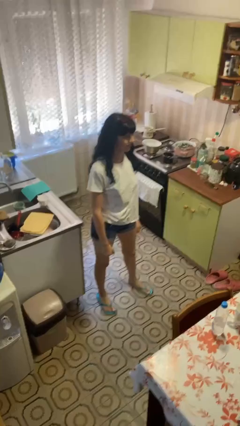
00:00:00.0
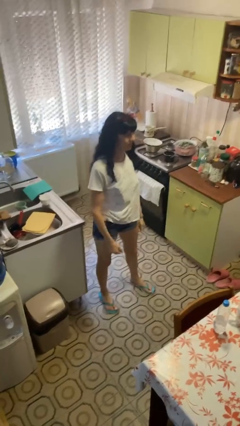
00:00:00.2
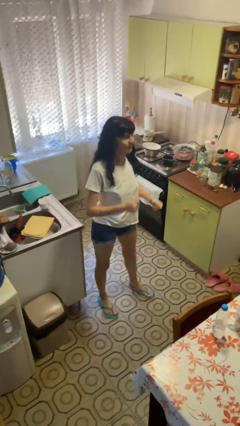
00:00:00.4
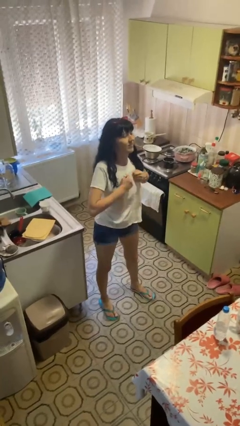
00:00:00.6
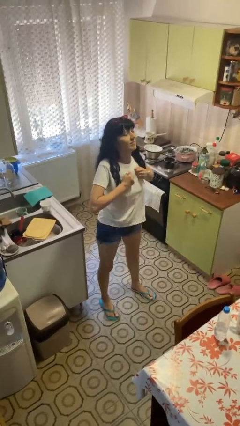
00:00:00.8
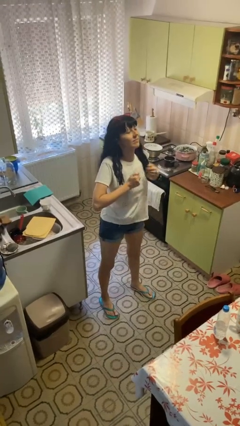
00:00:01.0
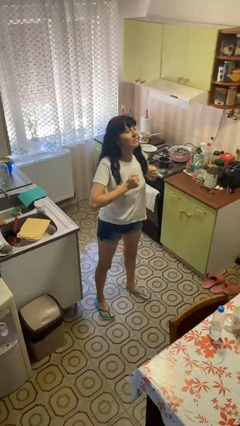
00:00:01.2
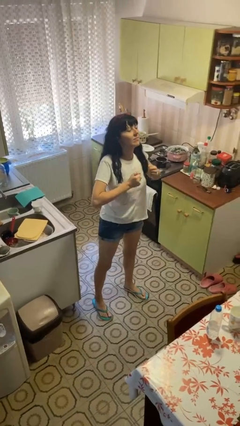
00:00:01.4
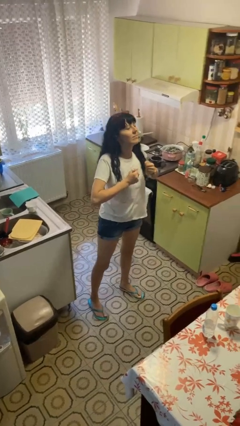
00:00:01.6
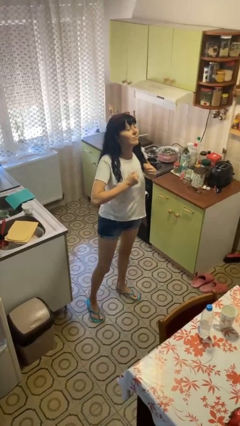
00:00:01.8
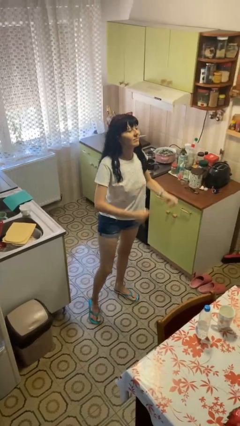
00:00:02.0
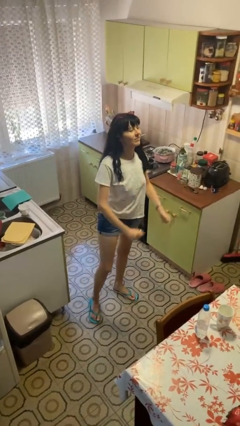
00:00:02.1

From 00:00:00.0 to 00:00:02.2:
person drums on chest

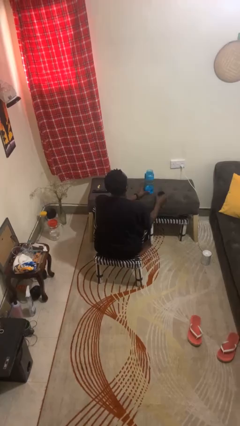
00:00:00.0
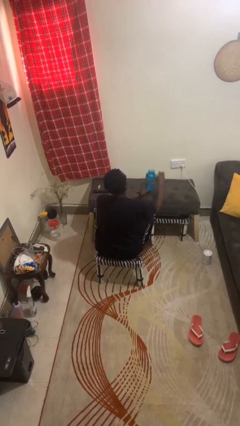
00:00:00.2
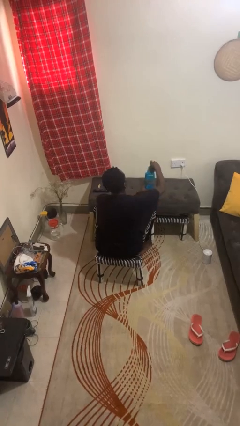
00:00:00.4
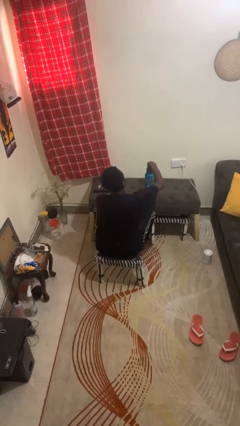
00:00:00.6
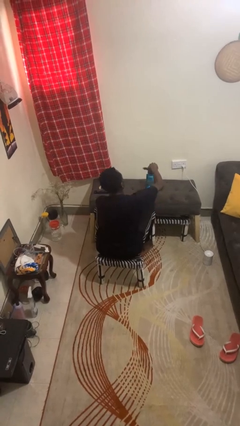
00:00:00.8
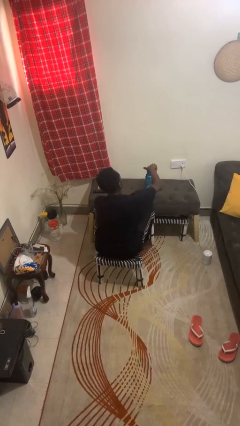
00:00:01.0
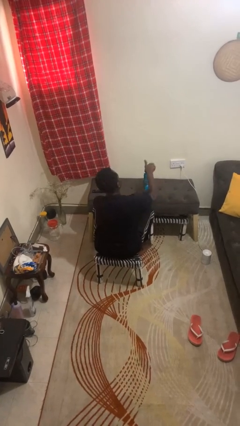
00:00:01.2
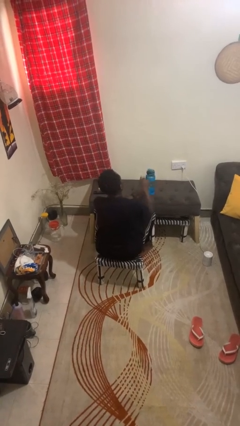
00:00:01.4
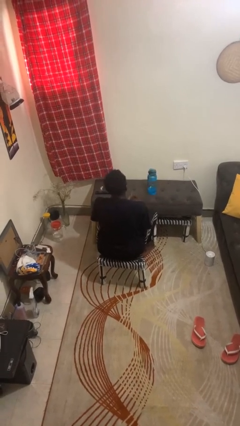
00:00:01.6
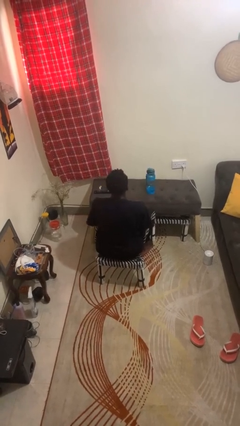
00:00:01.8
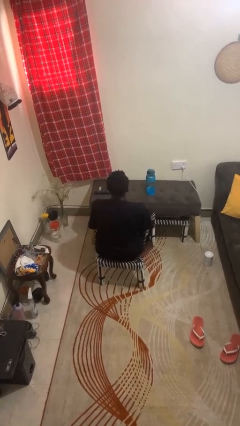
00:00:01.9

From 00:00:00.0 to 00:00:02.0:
person closes jar

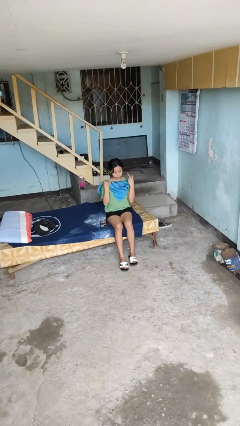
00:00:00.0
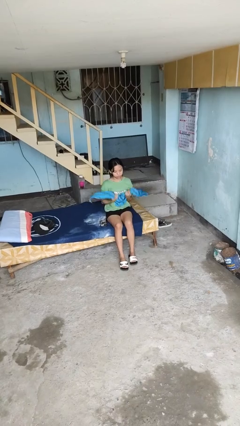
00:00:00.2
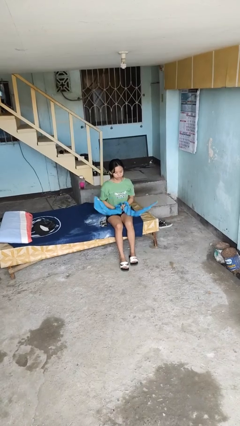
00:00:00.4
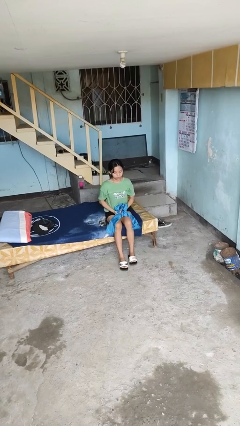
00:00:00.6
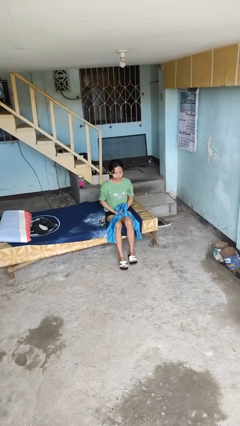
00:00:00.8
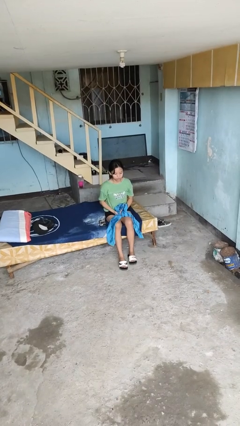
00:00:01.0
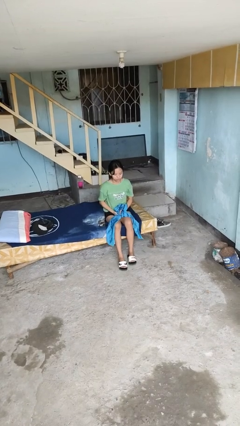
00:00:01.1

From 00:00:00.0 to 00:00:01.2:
person takes off scarf

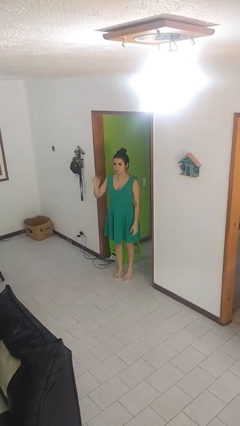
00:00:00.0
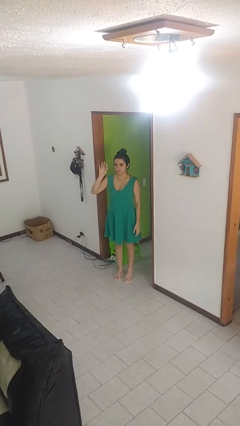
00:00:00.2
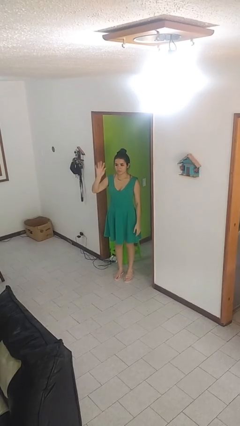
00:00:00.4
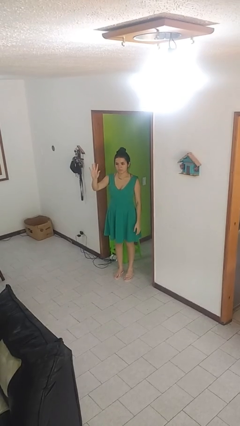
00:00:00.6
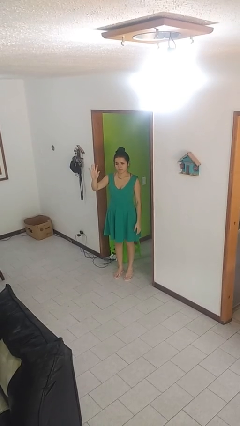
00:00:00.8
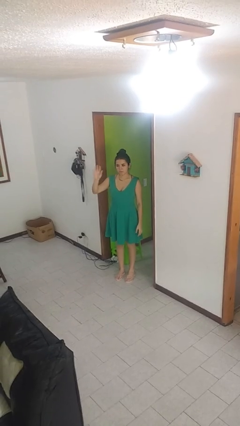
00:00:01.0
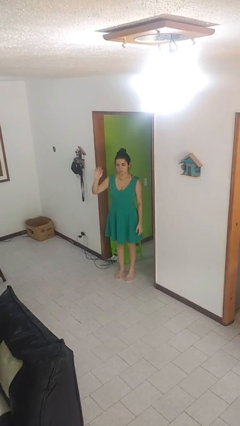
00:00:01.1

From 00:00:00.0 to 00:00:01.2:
person gestures number five

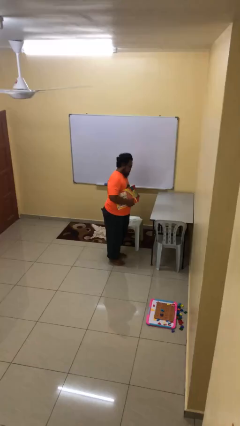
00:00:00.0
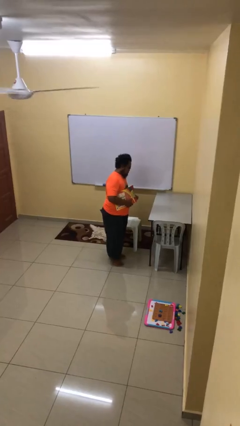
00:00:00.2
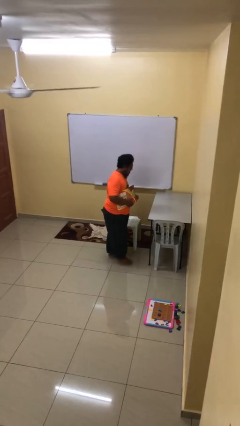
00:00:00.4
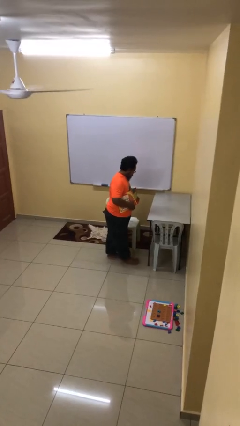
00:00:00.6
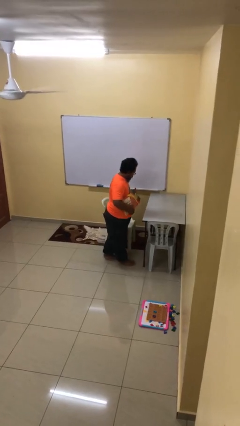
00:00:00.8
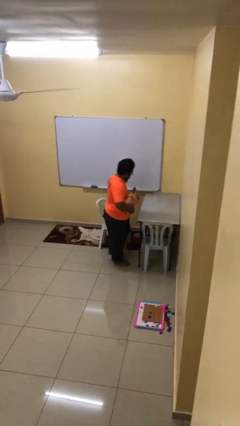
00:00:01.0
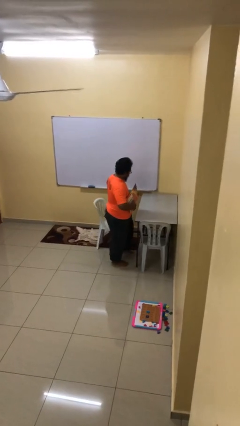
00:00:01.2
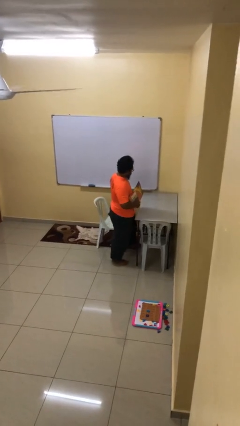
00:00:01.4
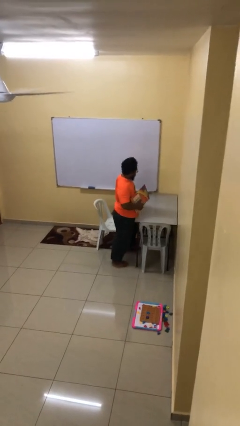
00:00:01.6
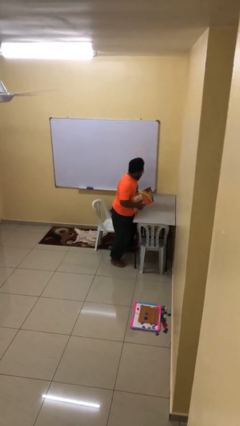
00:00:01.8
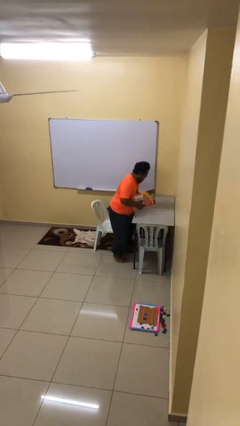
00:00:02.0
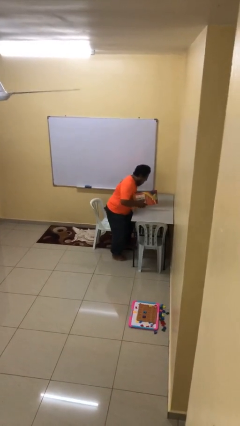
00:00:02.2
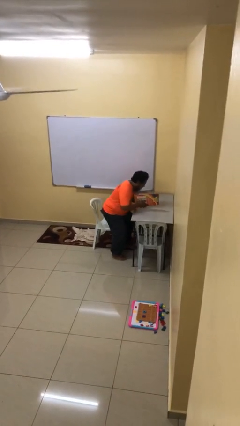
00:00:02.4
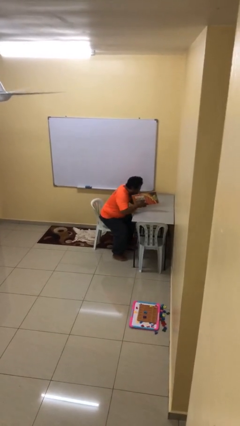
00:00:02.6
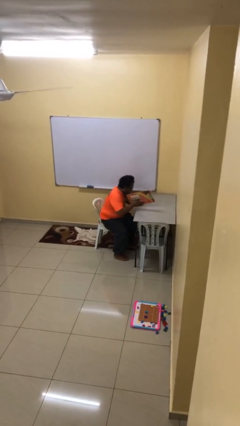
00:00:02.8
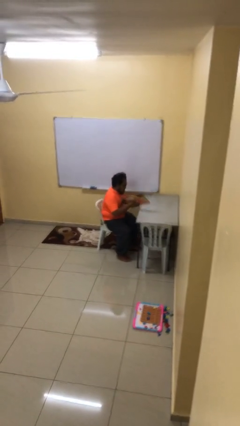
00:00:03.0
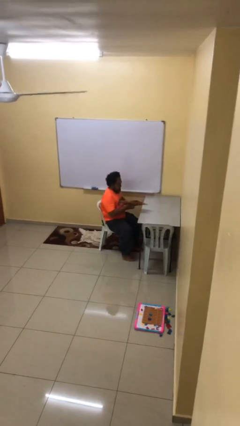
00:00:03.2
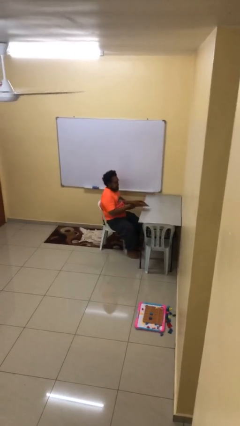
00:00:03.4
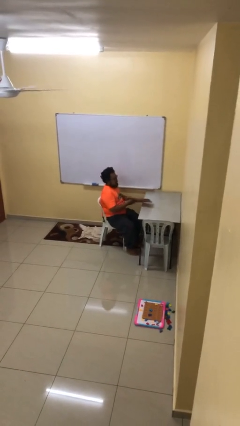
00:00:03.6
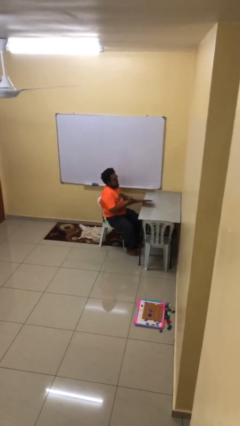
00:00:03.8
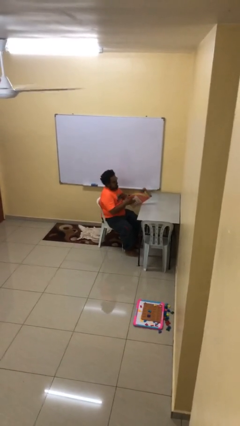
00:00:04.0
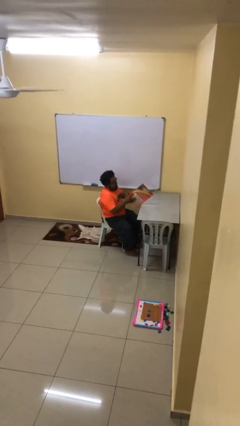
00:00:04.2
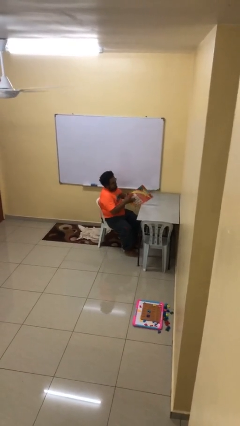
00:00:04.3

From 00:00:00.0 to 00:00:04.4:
person sits down

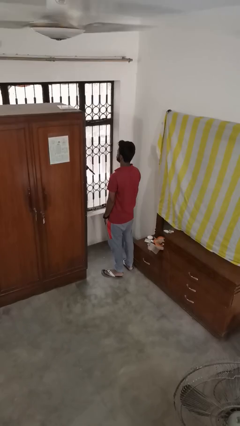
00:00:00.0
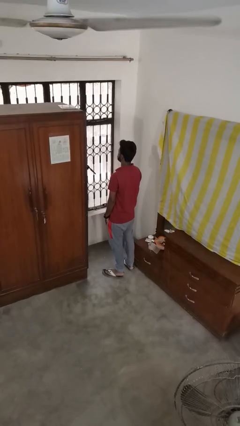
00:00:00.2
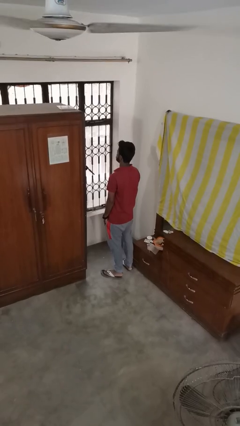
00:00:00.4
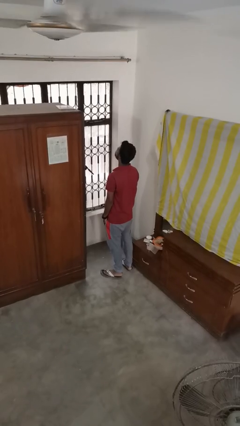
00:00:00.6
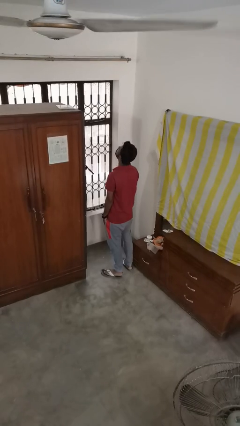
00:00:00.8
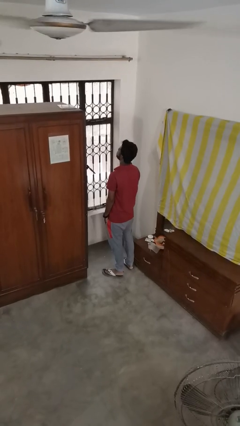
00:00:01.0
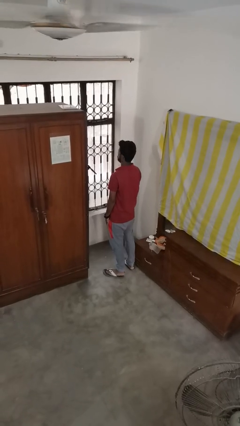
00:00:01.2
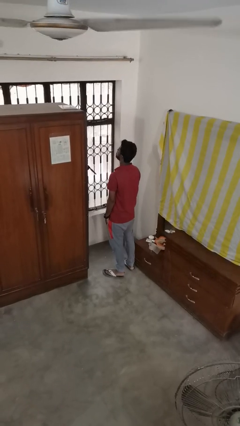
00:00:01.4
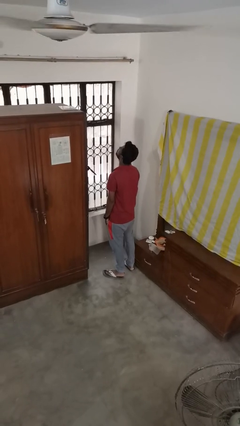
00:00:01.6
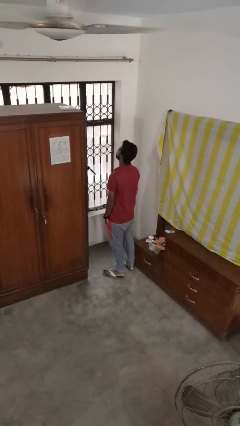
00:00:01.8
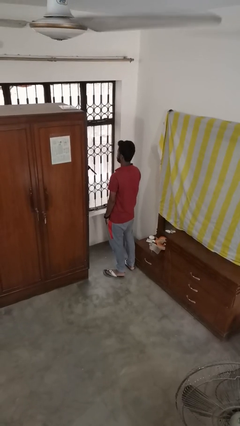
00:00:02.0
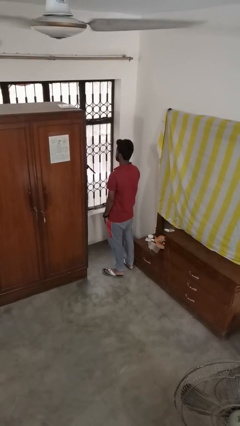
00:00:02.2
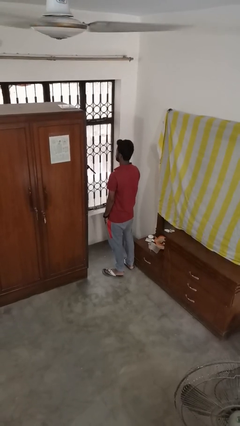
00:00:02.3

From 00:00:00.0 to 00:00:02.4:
person nods head

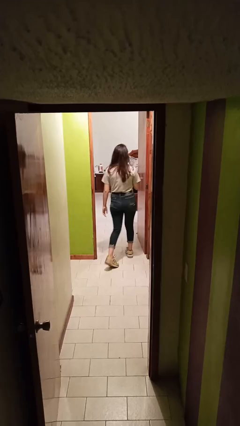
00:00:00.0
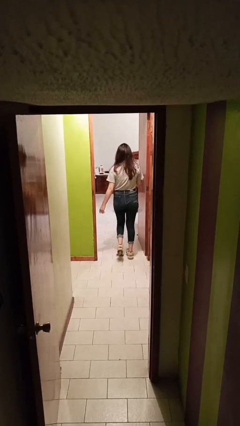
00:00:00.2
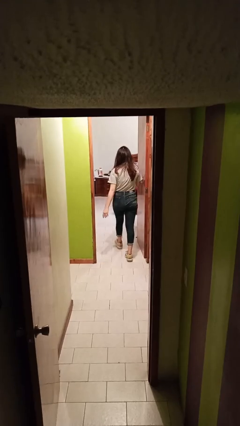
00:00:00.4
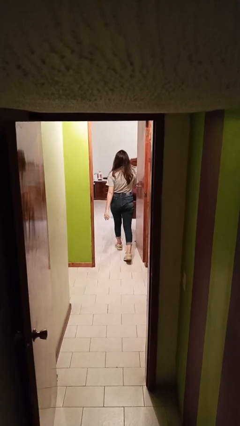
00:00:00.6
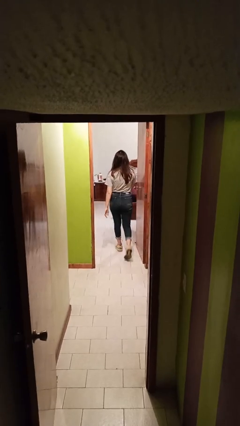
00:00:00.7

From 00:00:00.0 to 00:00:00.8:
person exits scene through structure

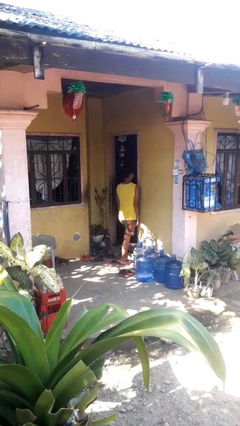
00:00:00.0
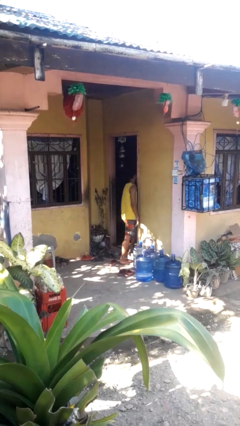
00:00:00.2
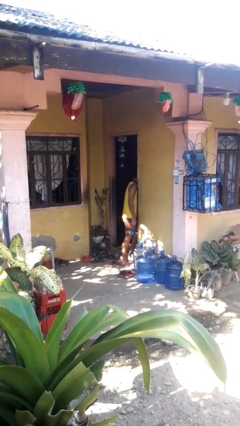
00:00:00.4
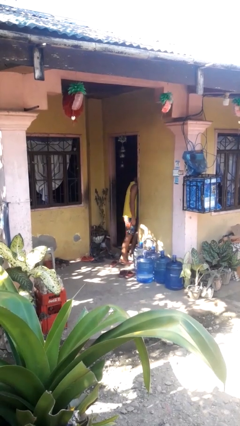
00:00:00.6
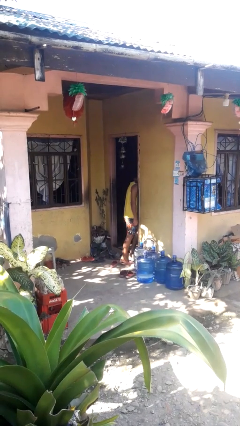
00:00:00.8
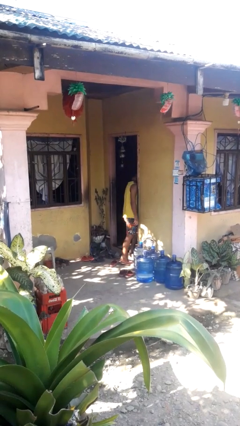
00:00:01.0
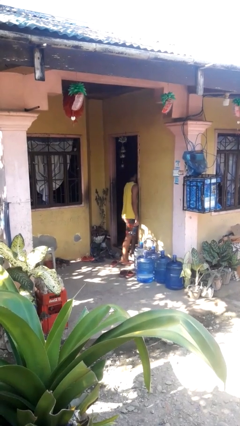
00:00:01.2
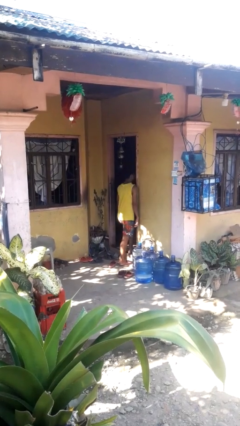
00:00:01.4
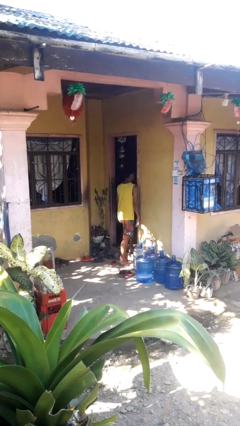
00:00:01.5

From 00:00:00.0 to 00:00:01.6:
person bumps into wall

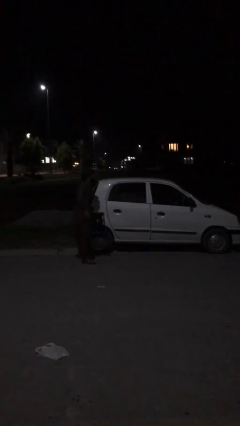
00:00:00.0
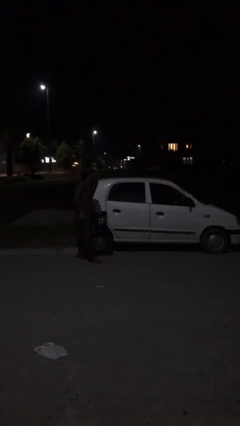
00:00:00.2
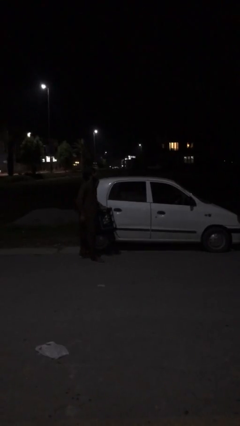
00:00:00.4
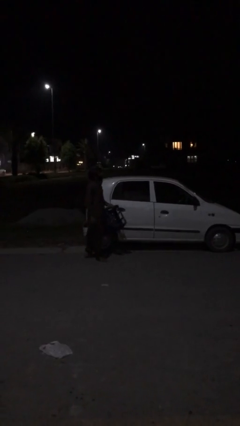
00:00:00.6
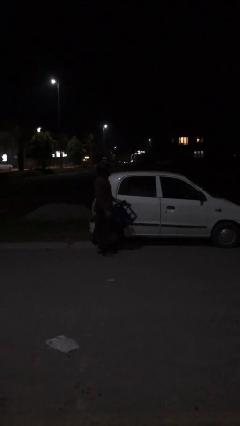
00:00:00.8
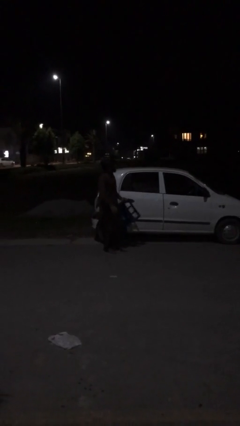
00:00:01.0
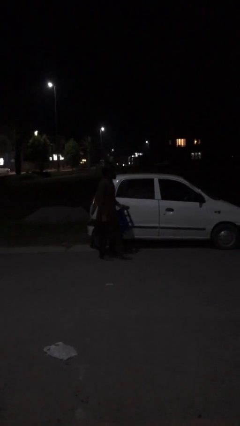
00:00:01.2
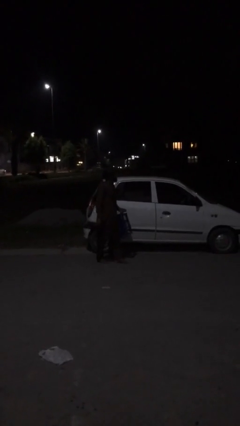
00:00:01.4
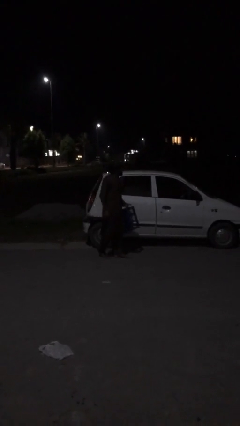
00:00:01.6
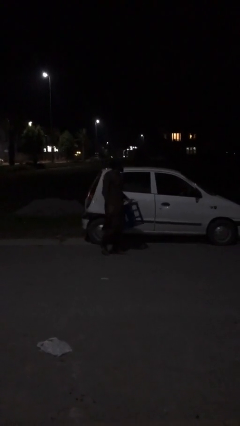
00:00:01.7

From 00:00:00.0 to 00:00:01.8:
person closes car door
